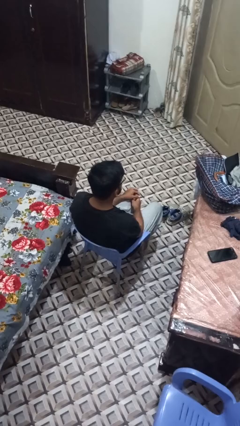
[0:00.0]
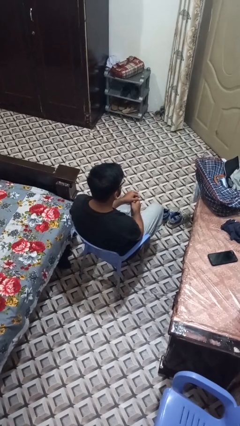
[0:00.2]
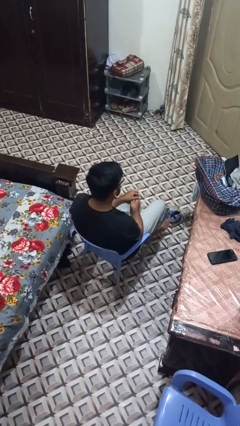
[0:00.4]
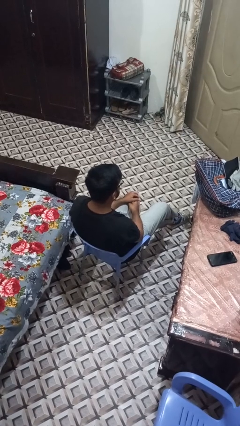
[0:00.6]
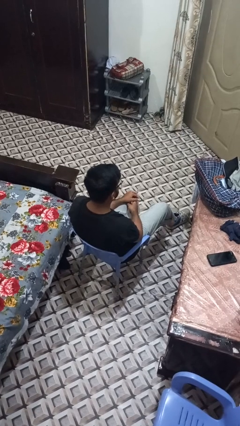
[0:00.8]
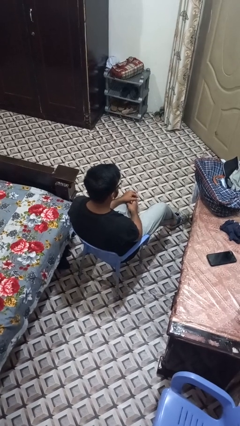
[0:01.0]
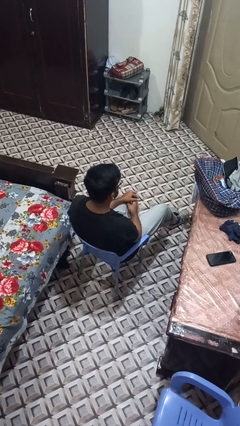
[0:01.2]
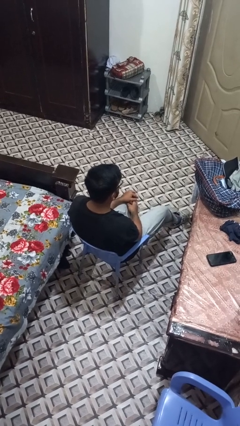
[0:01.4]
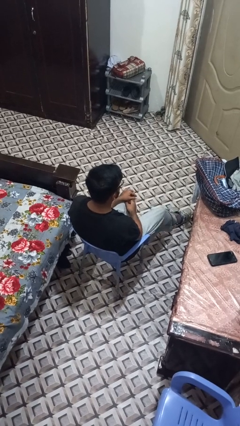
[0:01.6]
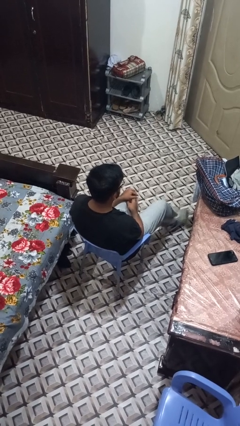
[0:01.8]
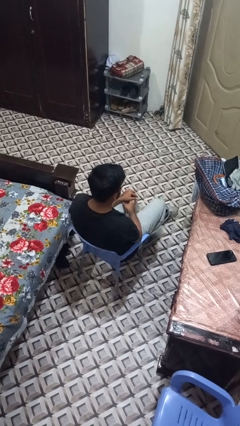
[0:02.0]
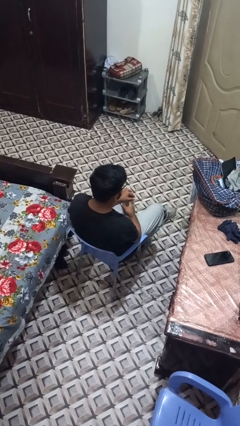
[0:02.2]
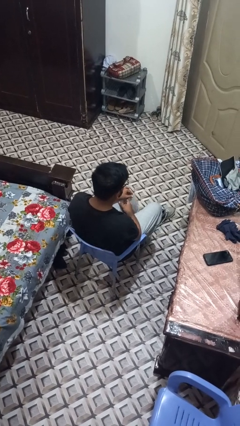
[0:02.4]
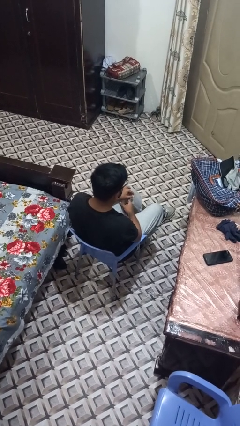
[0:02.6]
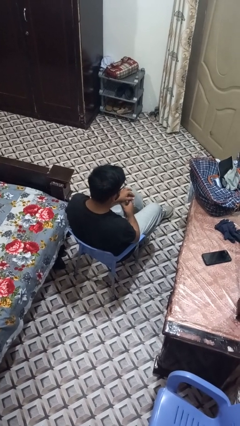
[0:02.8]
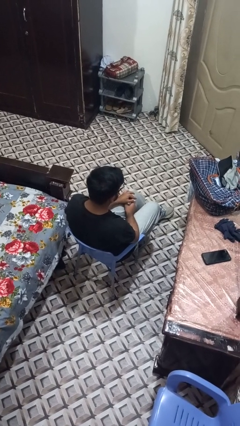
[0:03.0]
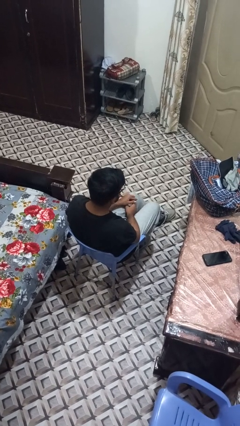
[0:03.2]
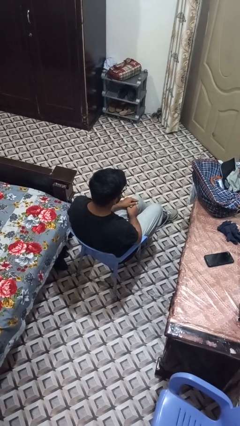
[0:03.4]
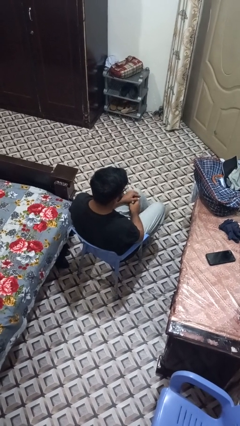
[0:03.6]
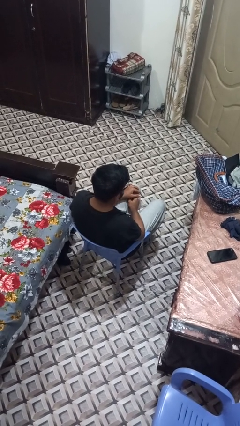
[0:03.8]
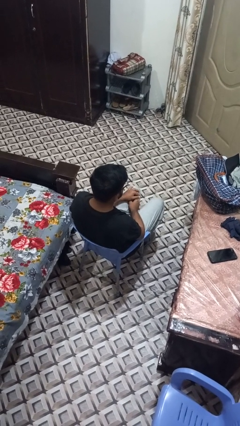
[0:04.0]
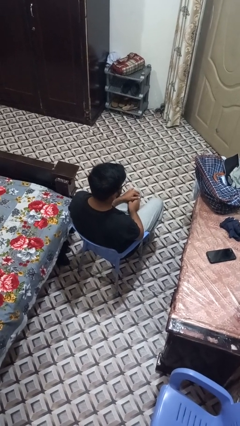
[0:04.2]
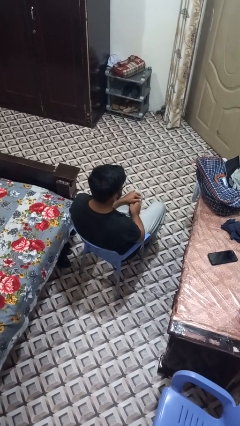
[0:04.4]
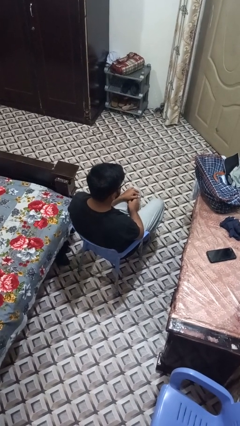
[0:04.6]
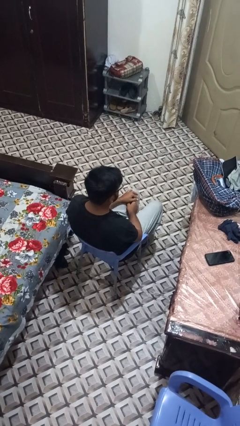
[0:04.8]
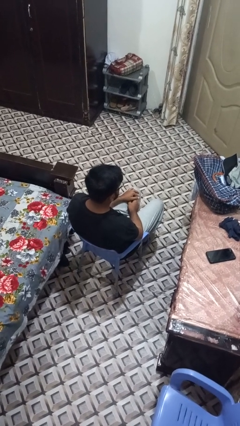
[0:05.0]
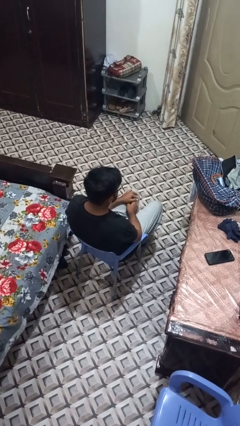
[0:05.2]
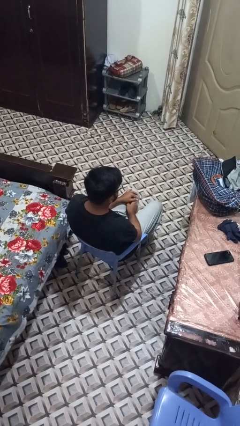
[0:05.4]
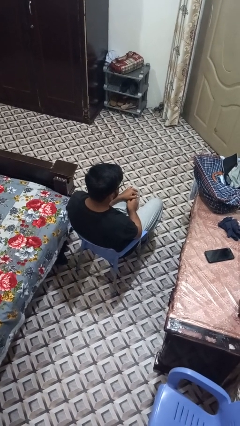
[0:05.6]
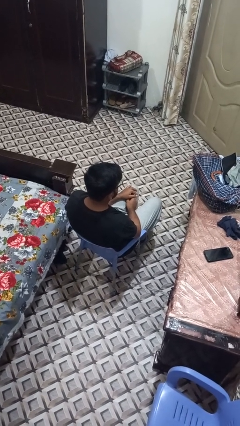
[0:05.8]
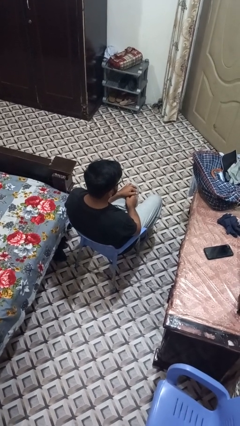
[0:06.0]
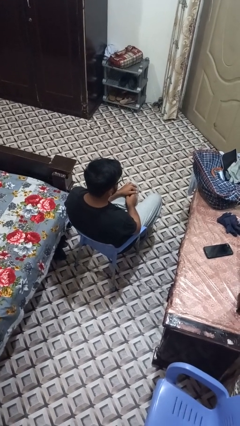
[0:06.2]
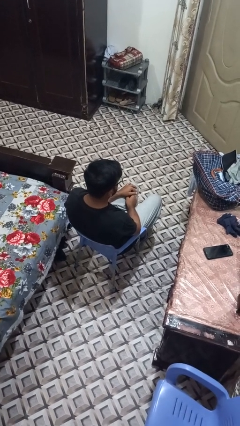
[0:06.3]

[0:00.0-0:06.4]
person puts on shoes

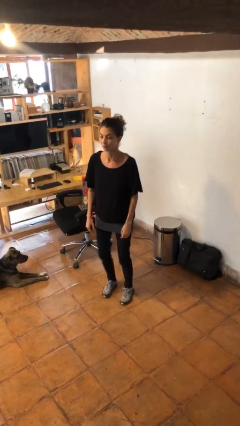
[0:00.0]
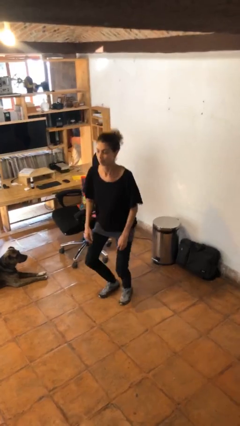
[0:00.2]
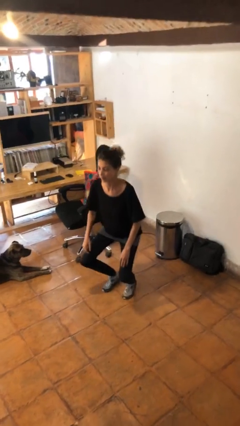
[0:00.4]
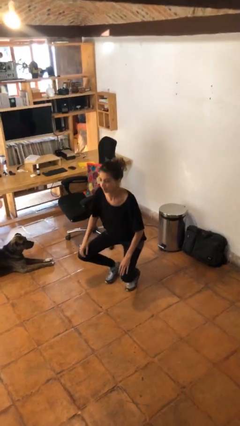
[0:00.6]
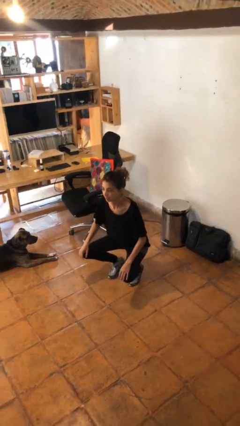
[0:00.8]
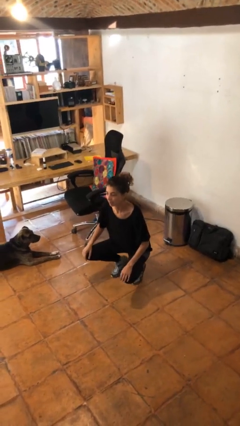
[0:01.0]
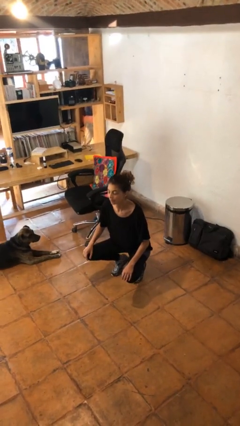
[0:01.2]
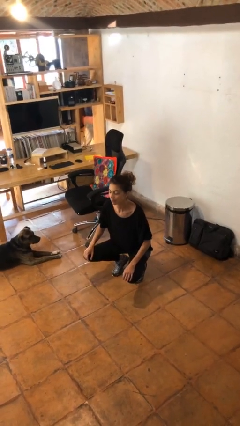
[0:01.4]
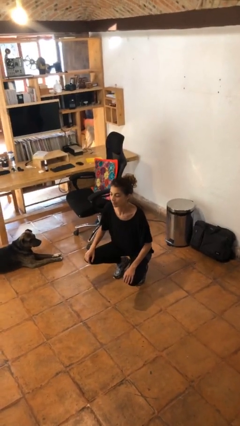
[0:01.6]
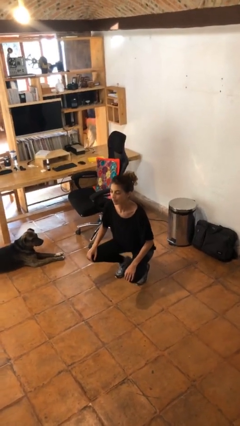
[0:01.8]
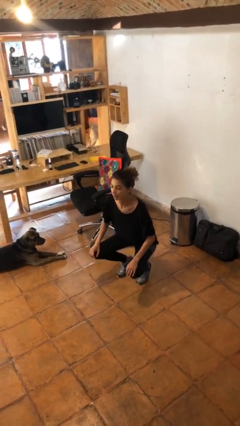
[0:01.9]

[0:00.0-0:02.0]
person squats

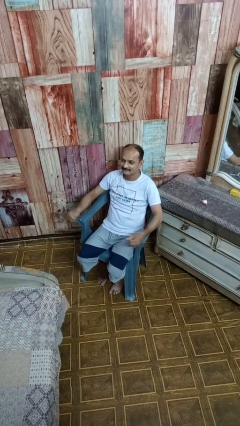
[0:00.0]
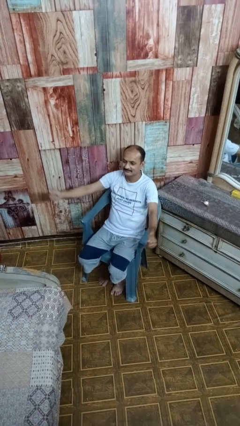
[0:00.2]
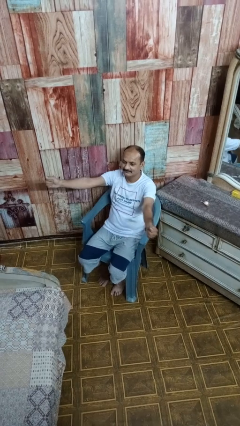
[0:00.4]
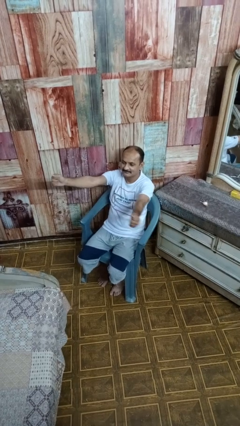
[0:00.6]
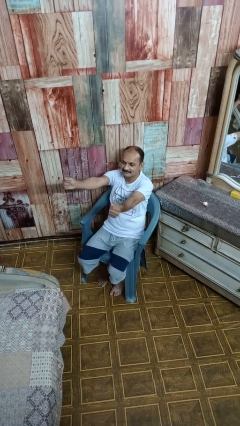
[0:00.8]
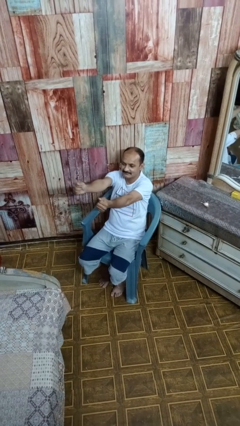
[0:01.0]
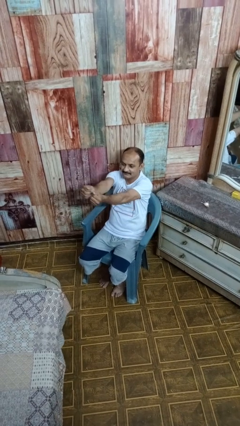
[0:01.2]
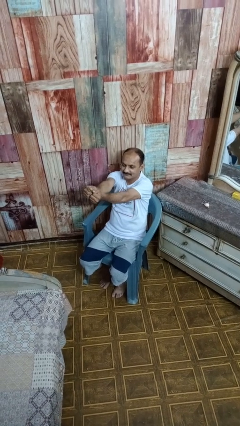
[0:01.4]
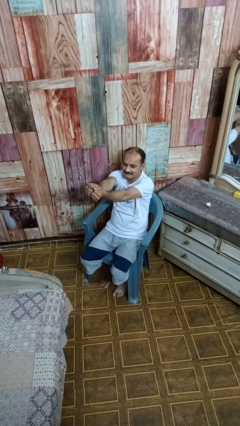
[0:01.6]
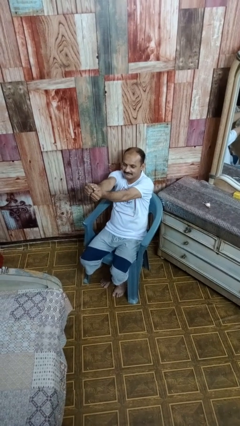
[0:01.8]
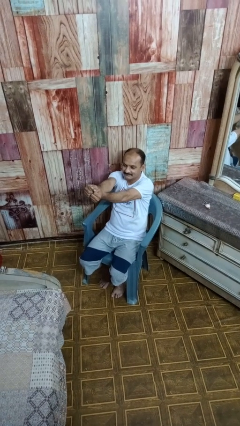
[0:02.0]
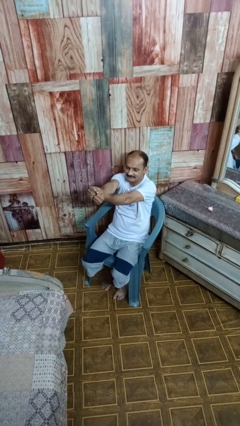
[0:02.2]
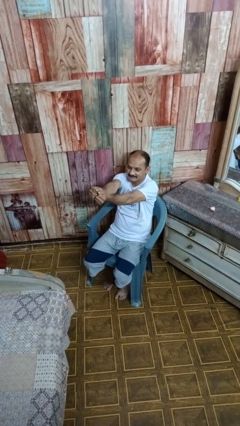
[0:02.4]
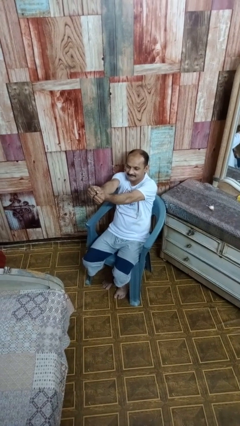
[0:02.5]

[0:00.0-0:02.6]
person gestures zoom in

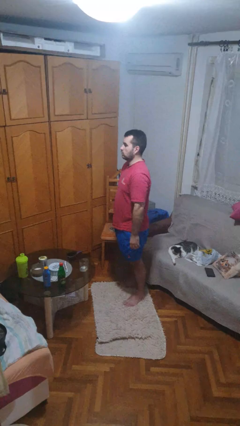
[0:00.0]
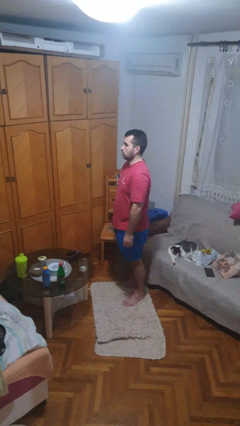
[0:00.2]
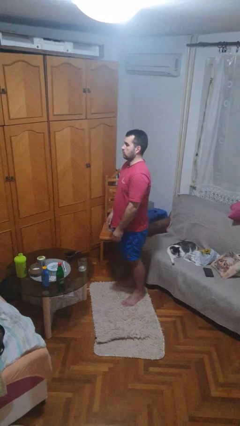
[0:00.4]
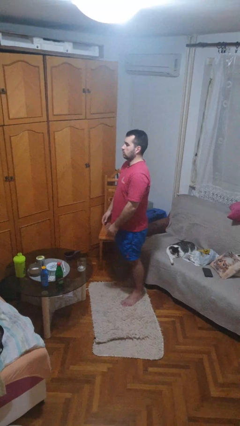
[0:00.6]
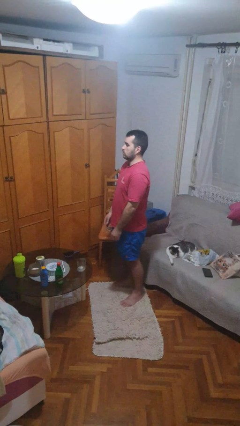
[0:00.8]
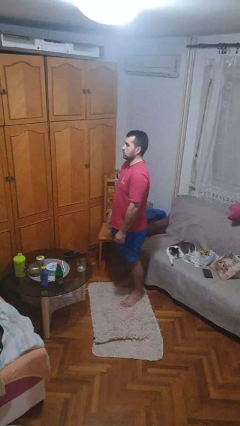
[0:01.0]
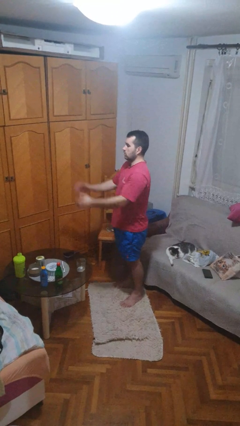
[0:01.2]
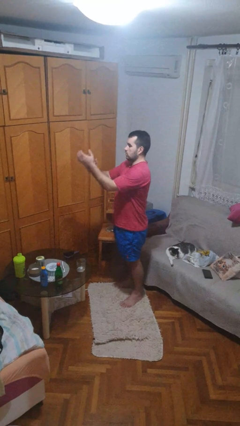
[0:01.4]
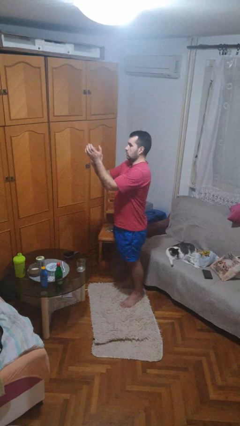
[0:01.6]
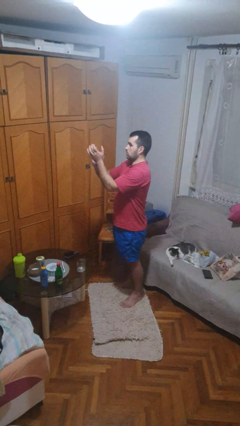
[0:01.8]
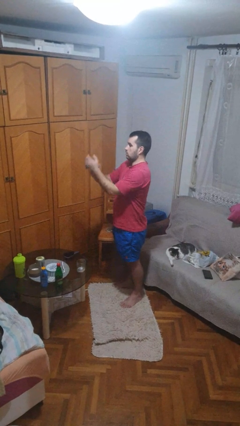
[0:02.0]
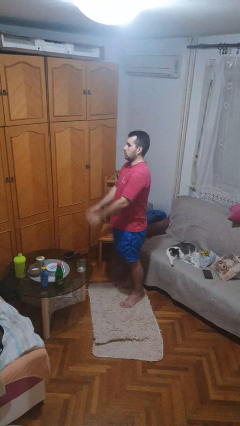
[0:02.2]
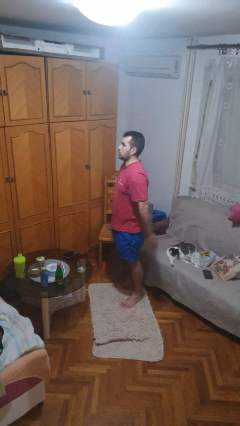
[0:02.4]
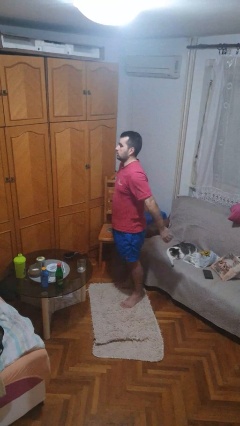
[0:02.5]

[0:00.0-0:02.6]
person claps hands

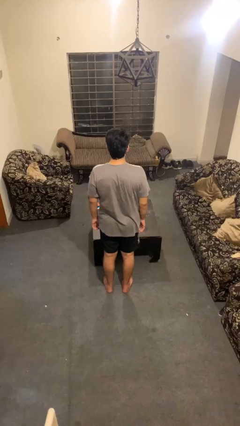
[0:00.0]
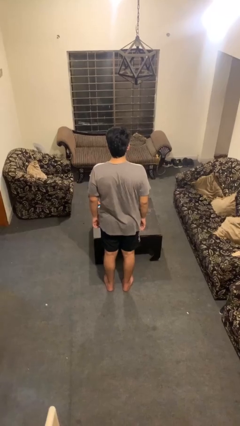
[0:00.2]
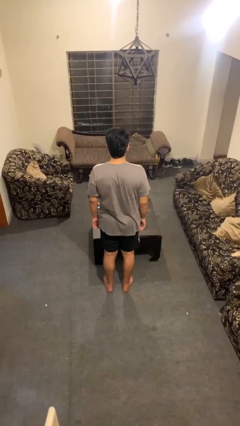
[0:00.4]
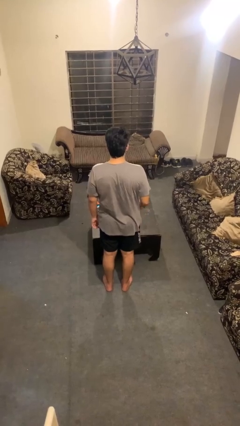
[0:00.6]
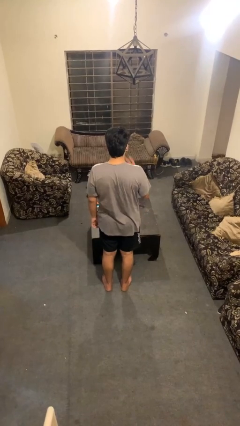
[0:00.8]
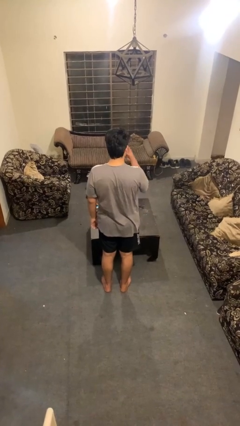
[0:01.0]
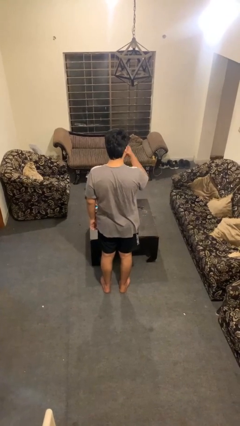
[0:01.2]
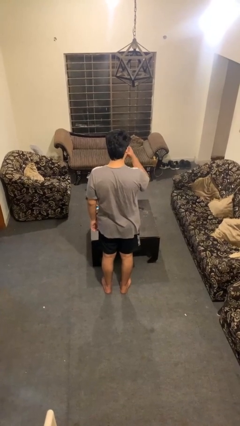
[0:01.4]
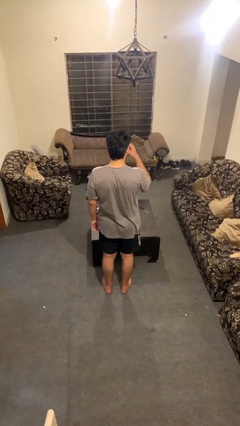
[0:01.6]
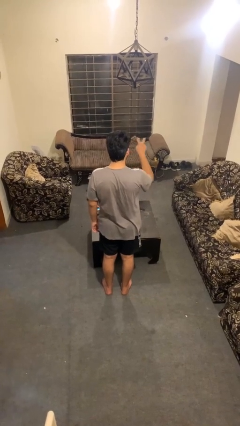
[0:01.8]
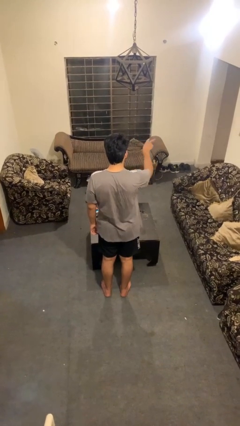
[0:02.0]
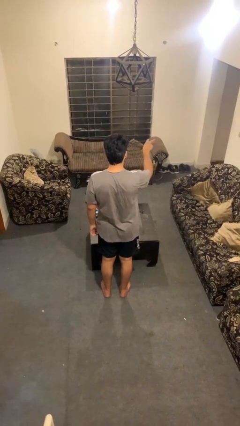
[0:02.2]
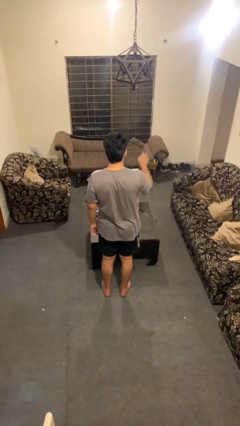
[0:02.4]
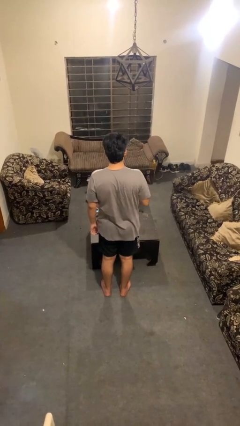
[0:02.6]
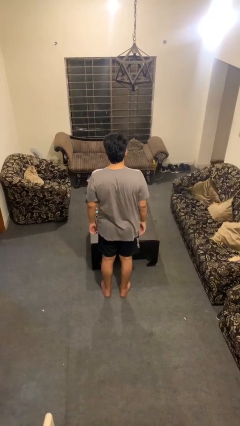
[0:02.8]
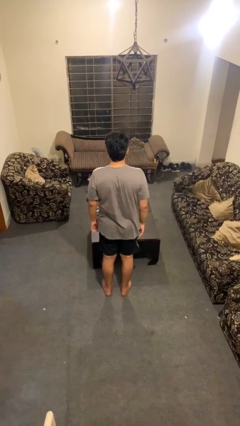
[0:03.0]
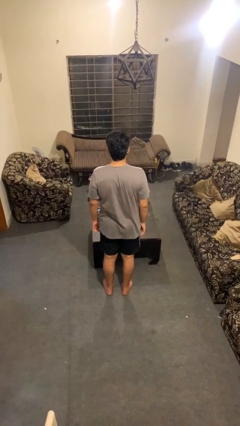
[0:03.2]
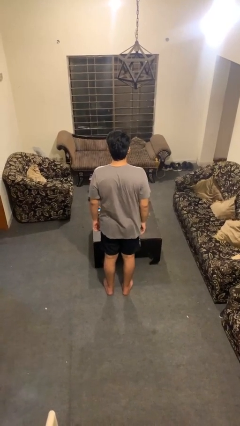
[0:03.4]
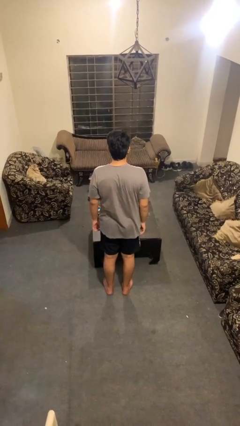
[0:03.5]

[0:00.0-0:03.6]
person gestures watch closely

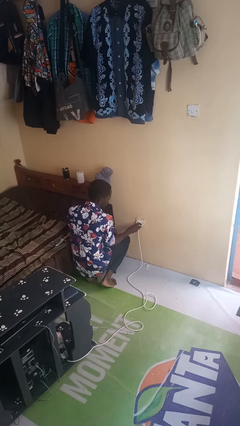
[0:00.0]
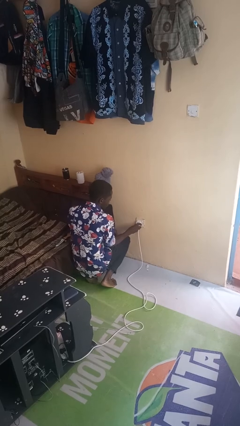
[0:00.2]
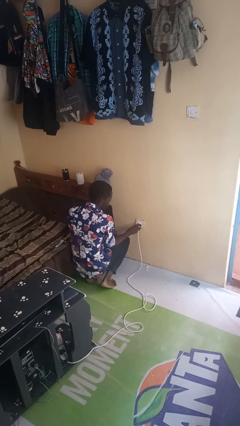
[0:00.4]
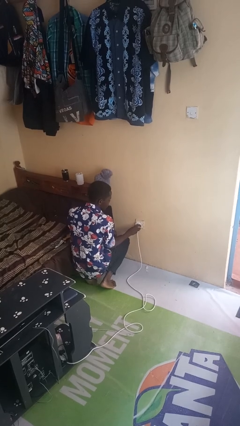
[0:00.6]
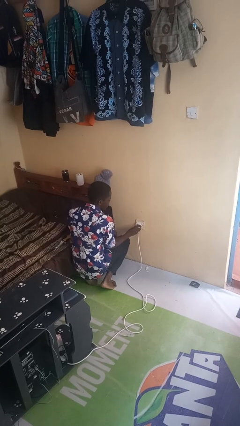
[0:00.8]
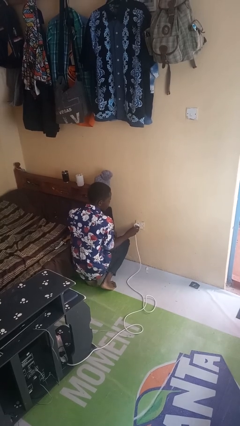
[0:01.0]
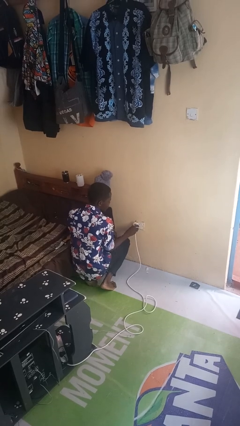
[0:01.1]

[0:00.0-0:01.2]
person unplugs from electrical socket
